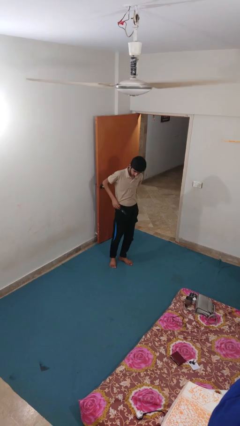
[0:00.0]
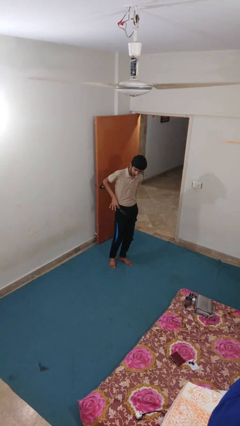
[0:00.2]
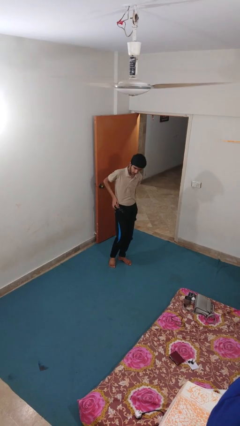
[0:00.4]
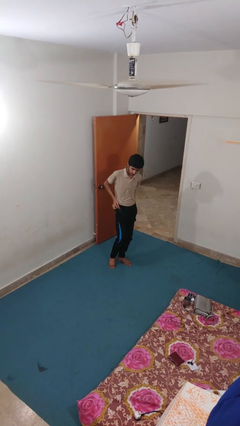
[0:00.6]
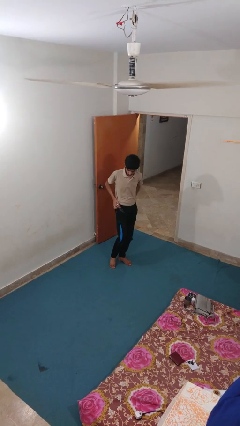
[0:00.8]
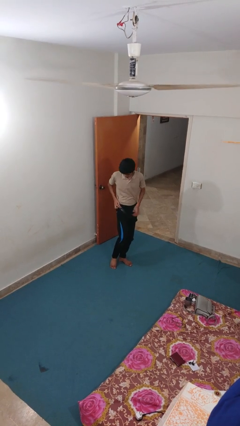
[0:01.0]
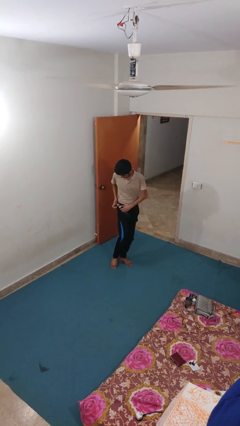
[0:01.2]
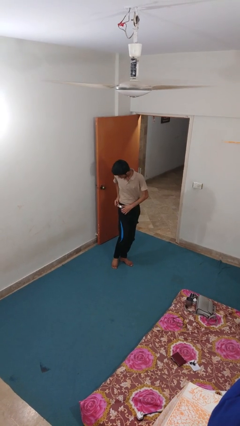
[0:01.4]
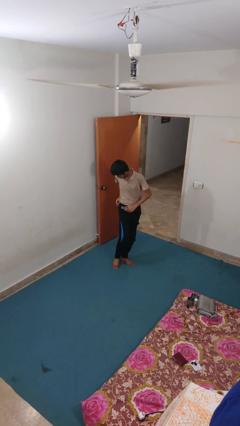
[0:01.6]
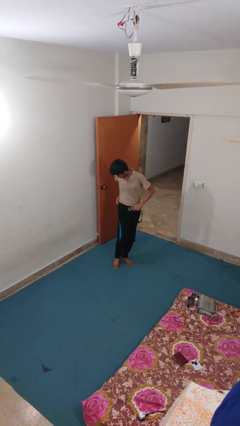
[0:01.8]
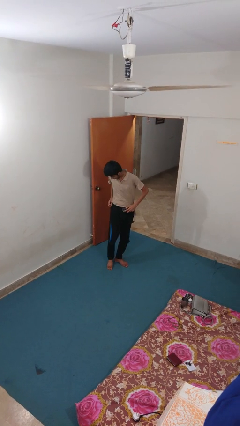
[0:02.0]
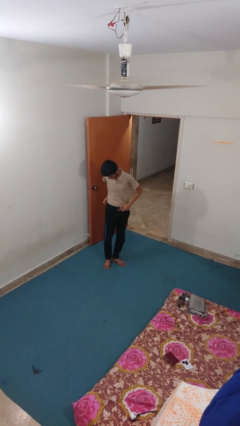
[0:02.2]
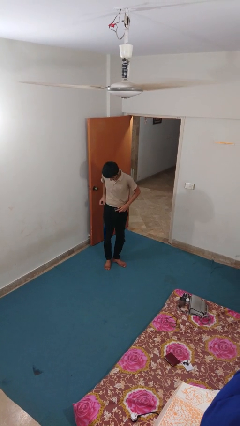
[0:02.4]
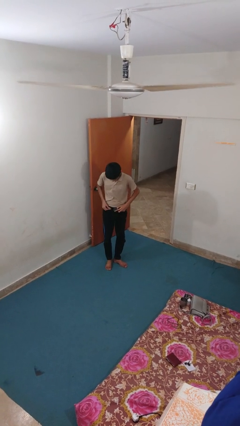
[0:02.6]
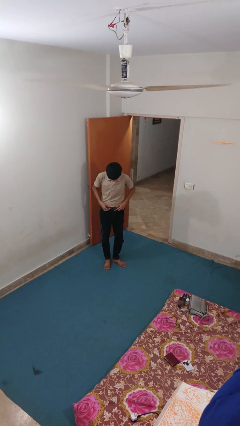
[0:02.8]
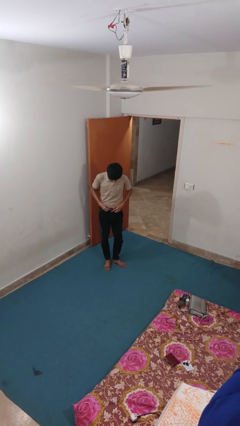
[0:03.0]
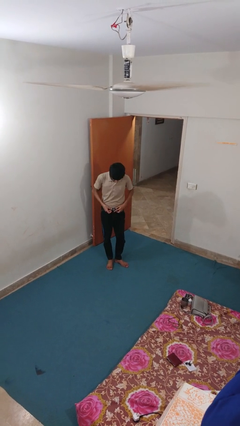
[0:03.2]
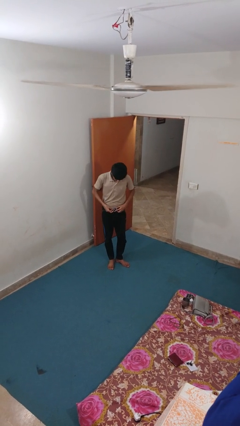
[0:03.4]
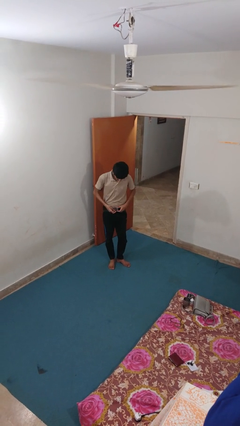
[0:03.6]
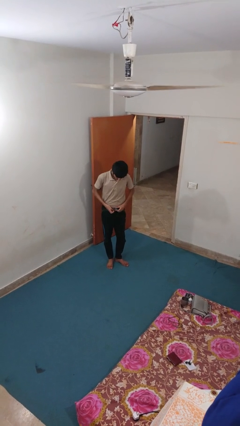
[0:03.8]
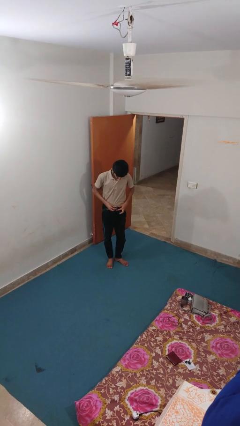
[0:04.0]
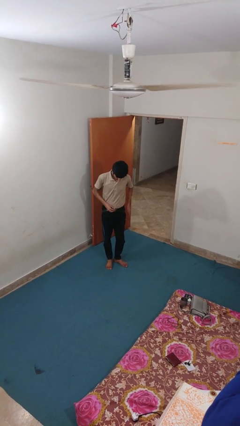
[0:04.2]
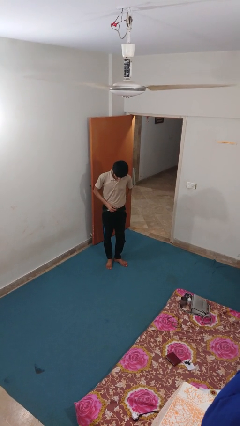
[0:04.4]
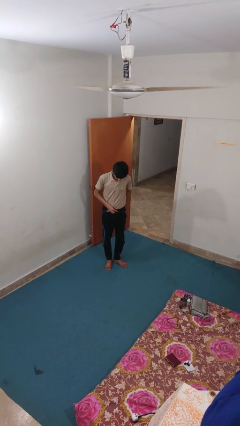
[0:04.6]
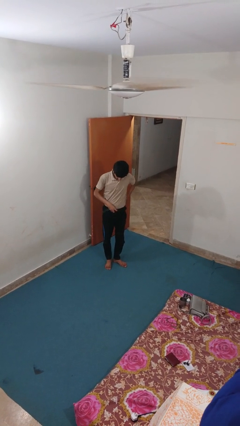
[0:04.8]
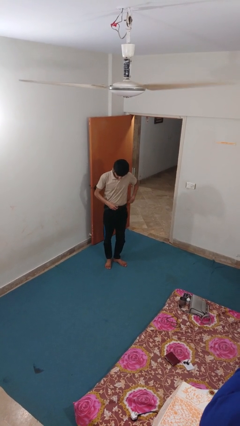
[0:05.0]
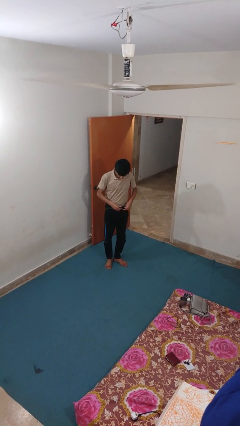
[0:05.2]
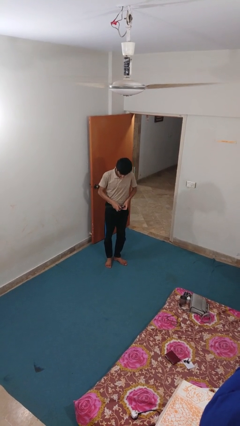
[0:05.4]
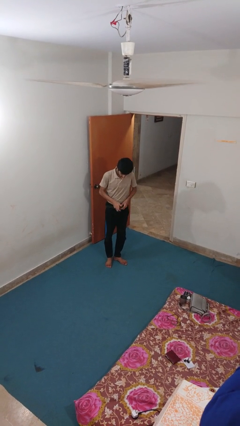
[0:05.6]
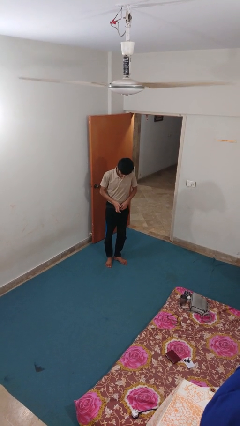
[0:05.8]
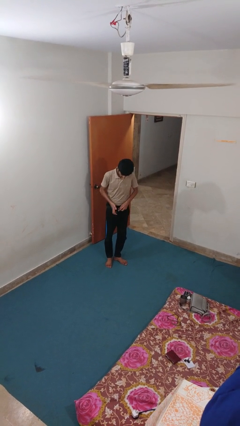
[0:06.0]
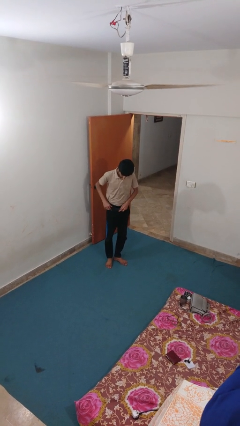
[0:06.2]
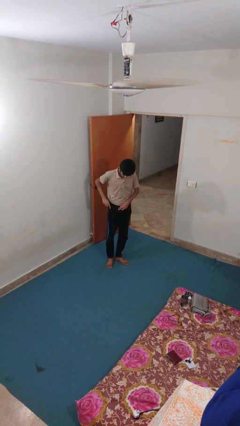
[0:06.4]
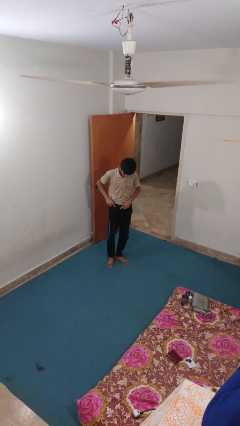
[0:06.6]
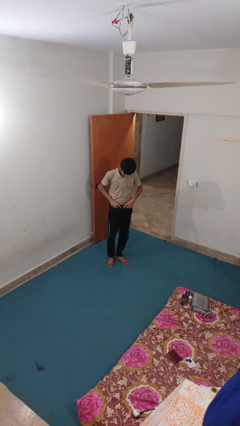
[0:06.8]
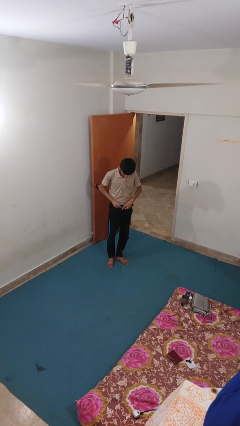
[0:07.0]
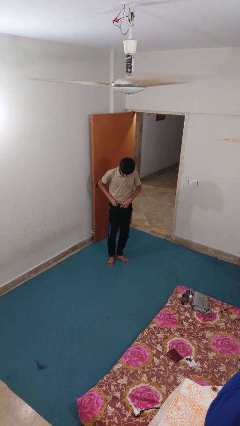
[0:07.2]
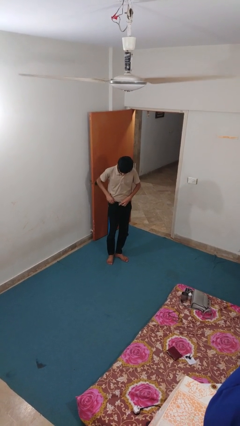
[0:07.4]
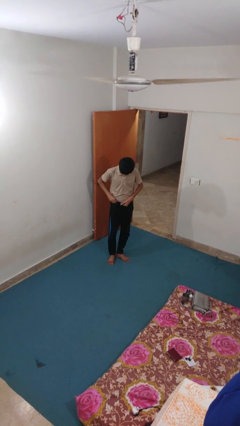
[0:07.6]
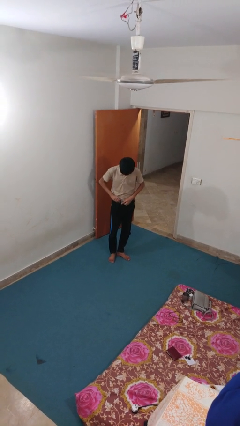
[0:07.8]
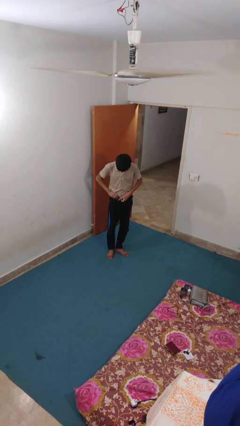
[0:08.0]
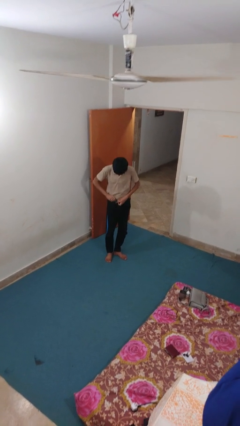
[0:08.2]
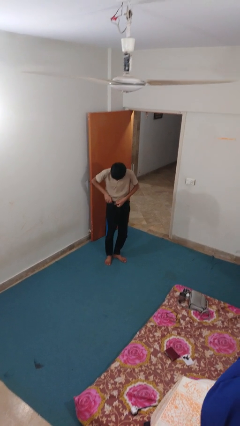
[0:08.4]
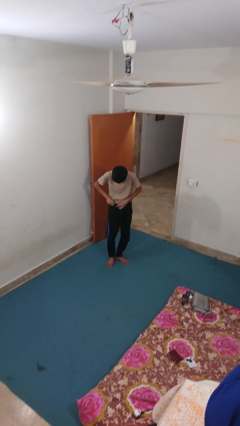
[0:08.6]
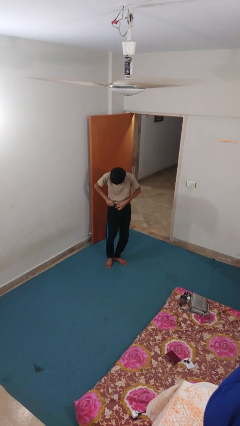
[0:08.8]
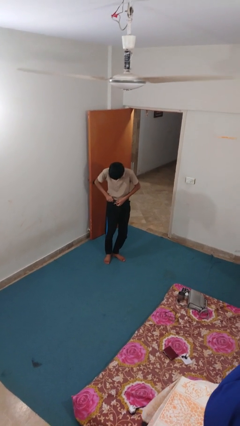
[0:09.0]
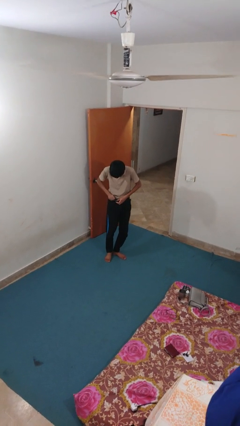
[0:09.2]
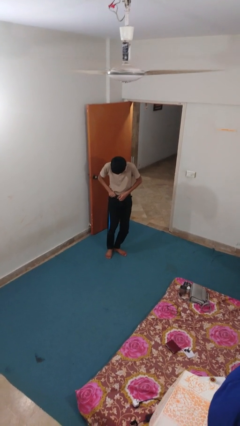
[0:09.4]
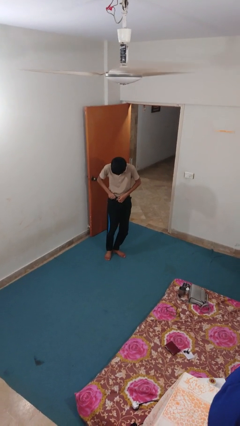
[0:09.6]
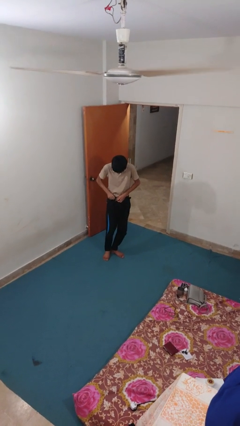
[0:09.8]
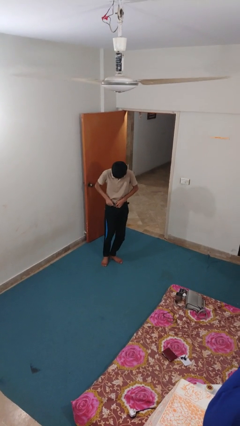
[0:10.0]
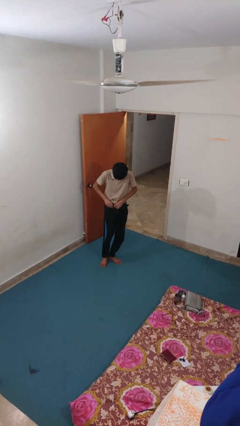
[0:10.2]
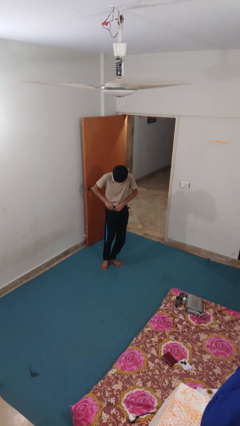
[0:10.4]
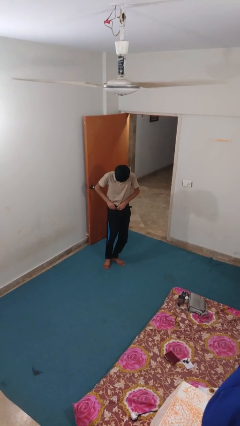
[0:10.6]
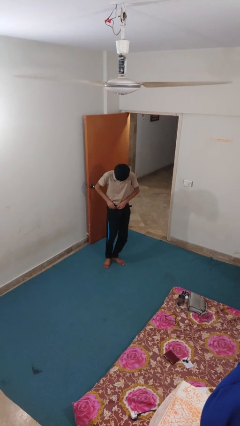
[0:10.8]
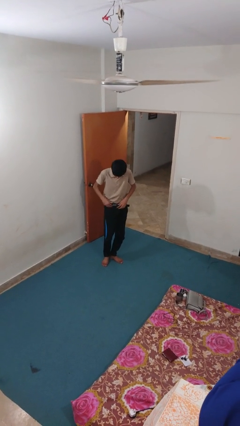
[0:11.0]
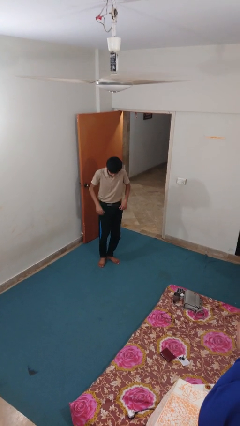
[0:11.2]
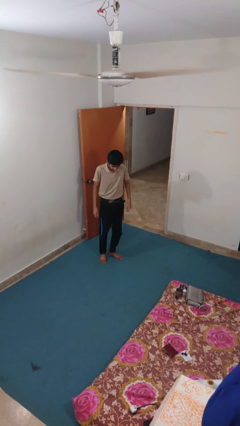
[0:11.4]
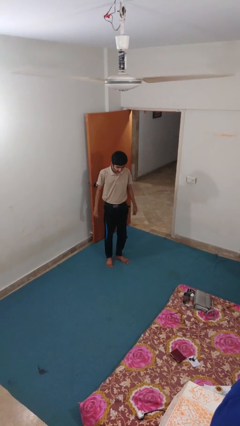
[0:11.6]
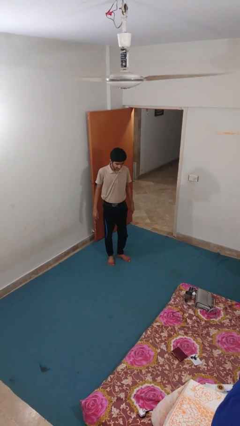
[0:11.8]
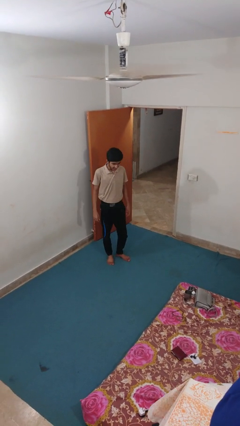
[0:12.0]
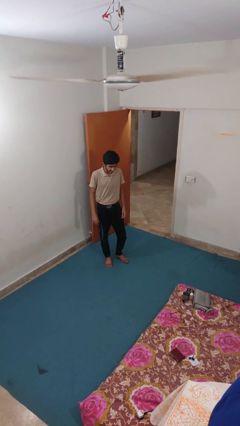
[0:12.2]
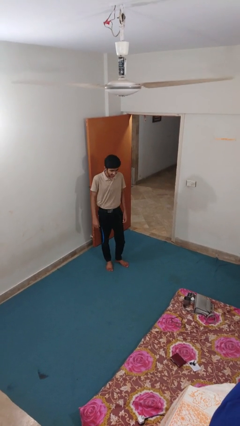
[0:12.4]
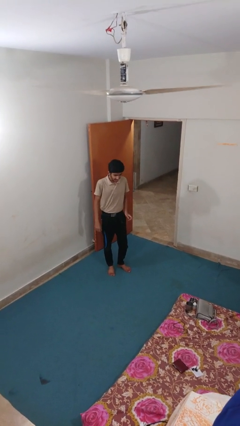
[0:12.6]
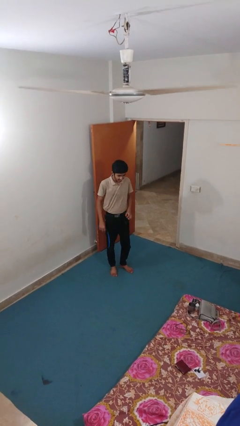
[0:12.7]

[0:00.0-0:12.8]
person puts on belt

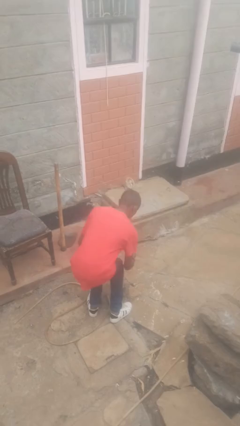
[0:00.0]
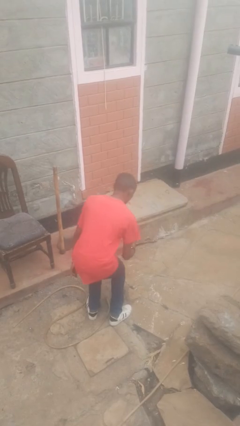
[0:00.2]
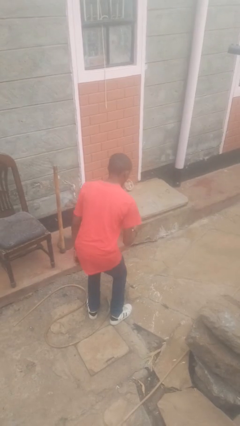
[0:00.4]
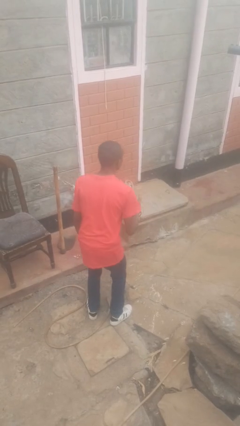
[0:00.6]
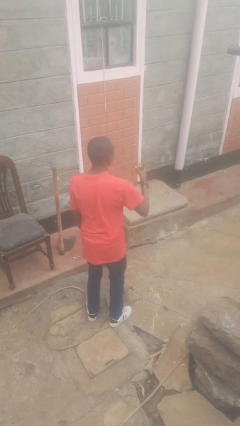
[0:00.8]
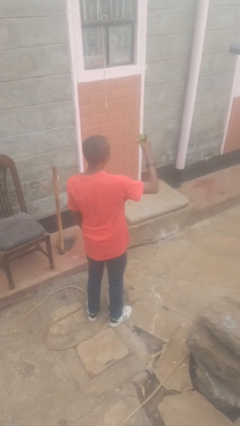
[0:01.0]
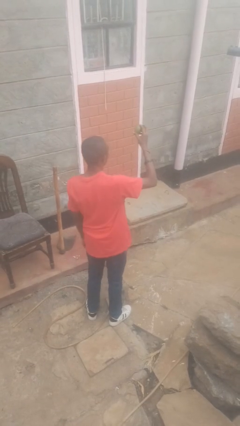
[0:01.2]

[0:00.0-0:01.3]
person catches dropped object

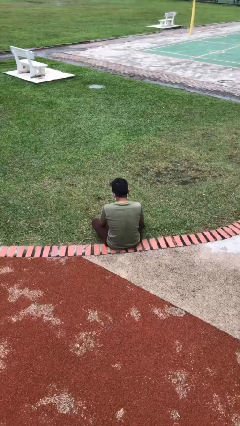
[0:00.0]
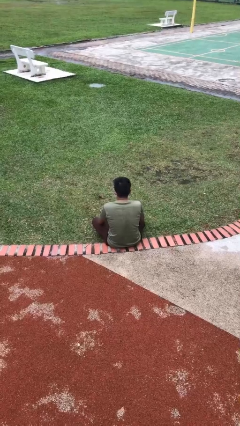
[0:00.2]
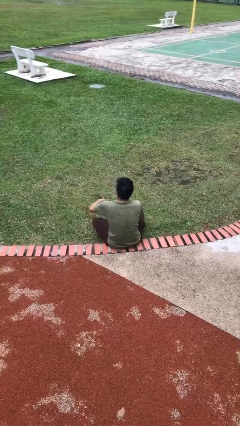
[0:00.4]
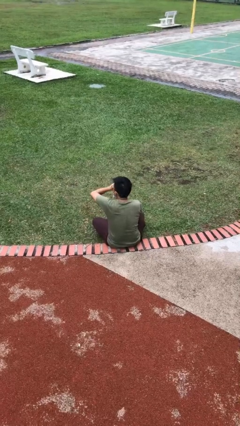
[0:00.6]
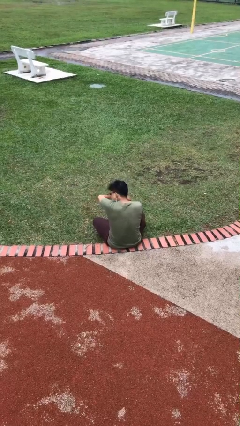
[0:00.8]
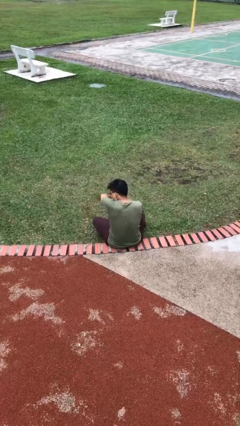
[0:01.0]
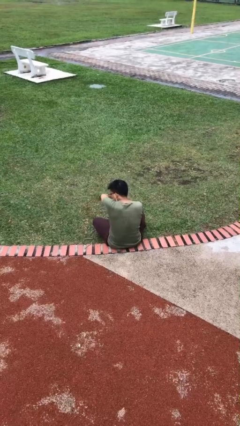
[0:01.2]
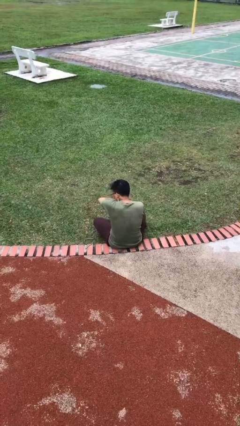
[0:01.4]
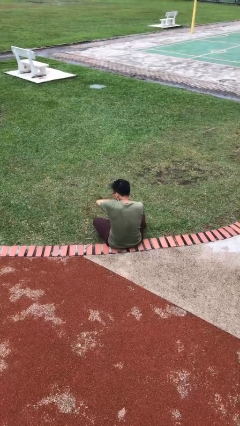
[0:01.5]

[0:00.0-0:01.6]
person sneezes into arm

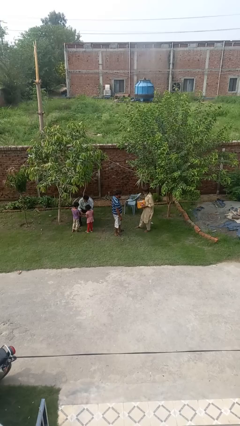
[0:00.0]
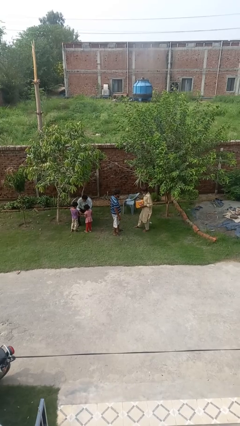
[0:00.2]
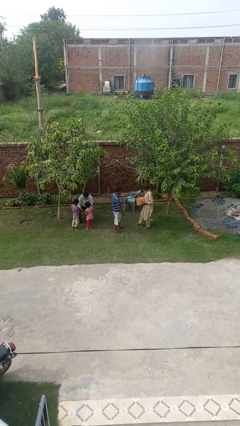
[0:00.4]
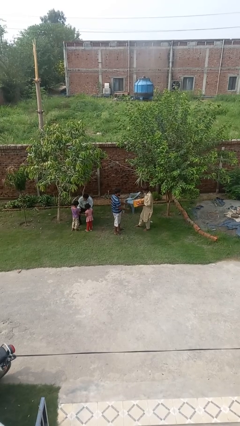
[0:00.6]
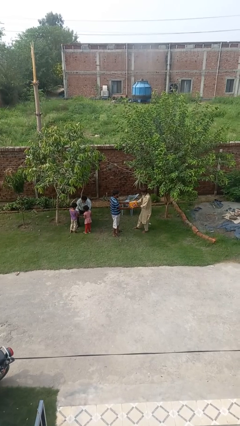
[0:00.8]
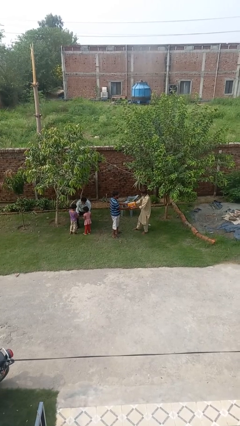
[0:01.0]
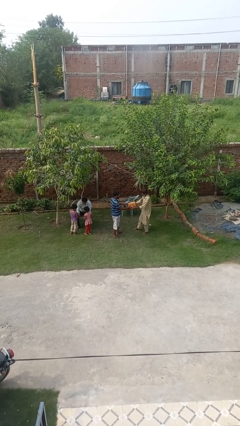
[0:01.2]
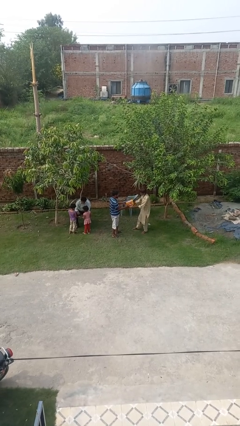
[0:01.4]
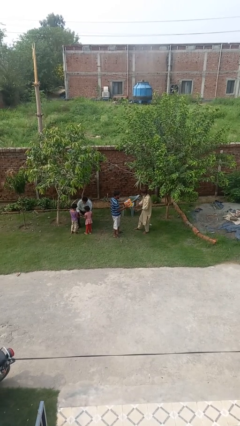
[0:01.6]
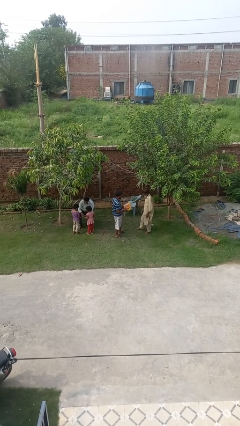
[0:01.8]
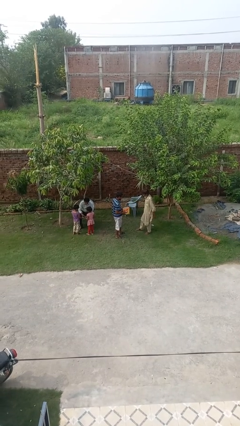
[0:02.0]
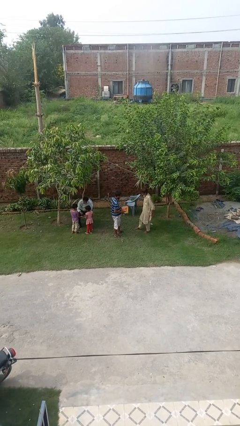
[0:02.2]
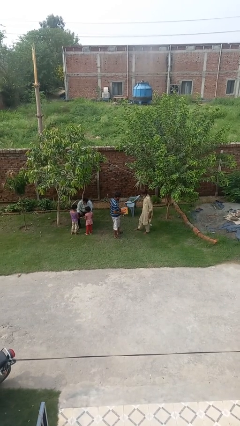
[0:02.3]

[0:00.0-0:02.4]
person transfers object to person

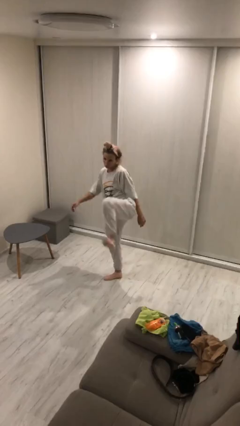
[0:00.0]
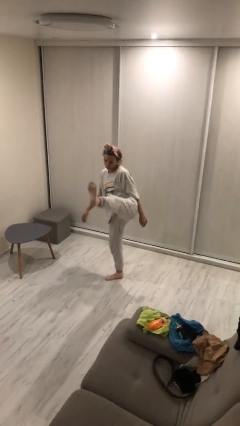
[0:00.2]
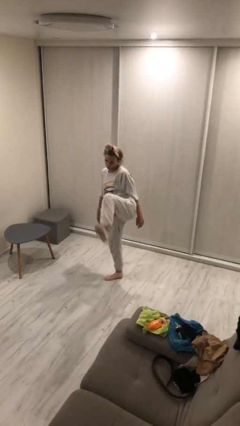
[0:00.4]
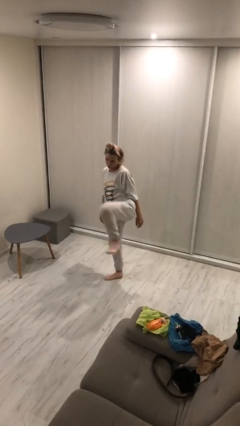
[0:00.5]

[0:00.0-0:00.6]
person karate kicks
